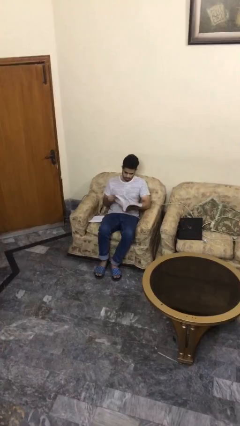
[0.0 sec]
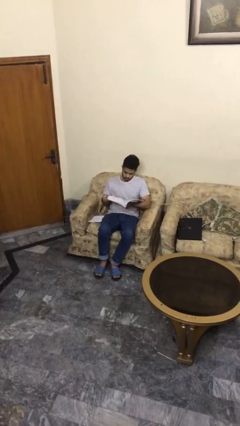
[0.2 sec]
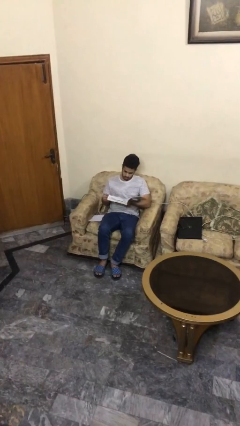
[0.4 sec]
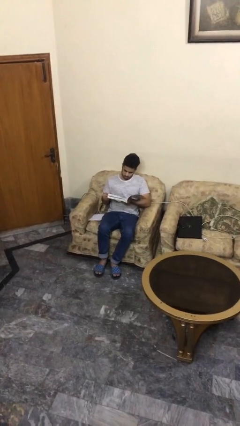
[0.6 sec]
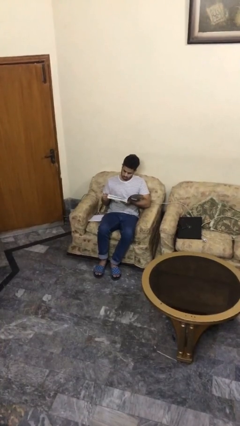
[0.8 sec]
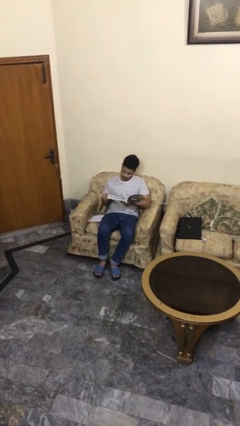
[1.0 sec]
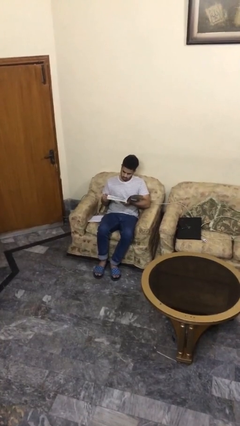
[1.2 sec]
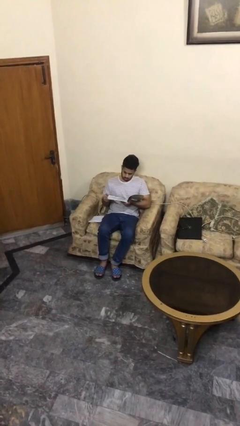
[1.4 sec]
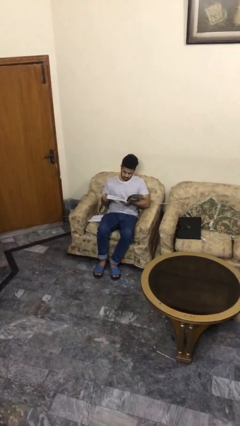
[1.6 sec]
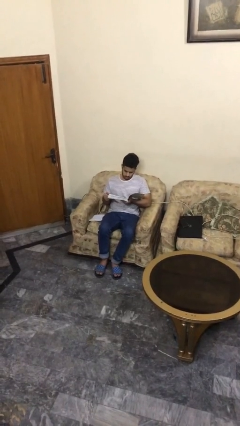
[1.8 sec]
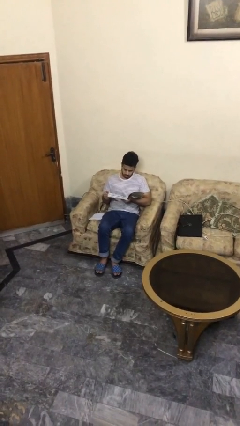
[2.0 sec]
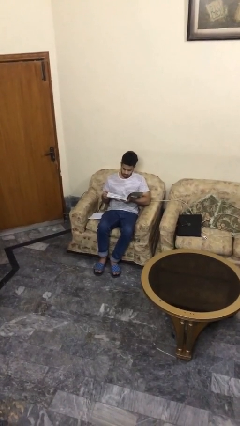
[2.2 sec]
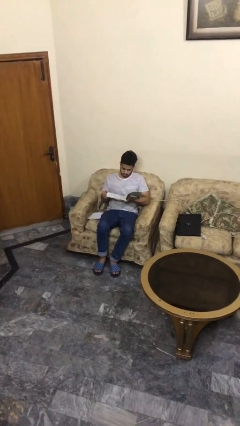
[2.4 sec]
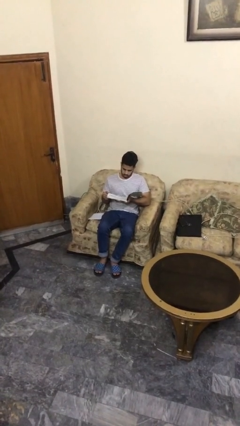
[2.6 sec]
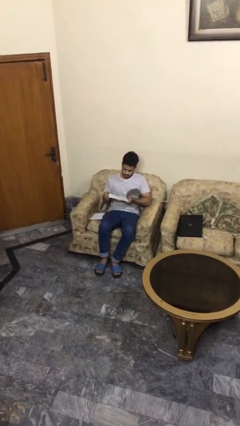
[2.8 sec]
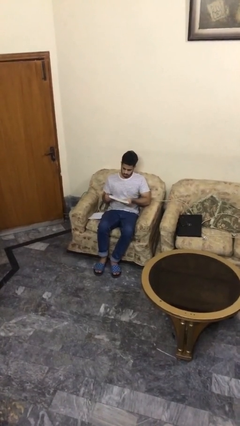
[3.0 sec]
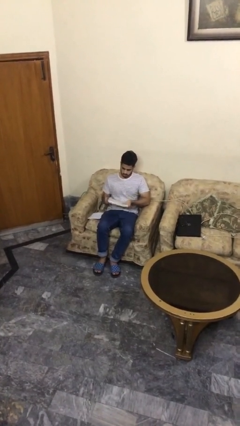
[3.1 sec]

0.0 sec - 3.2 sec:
person reads document

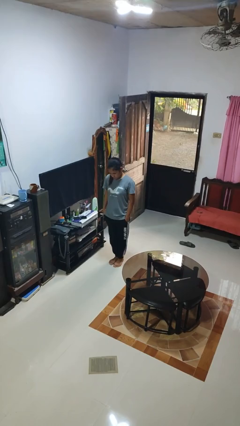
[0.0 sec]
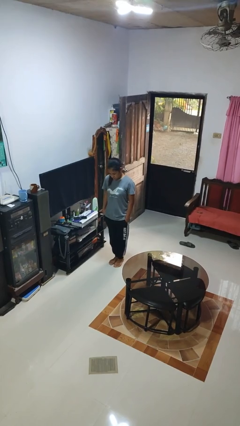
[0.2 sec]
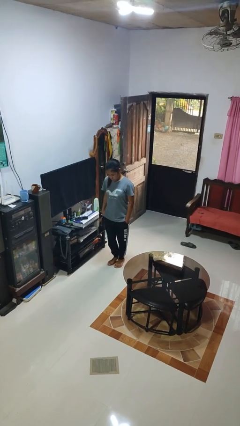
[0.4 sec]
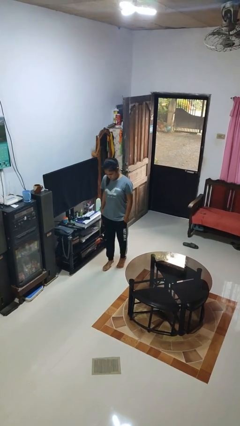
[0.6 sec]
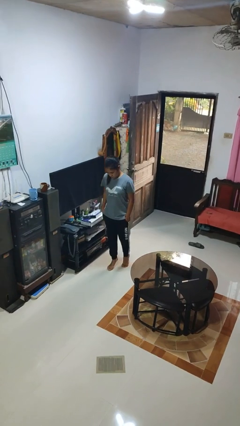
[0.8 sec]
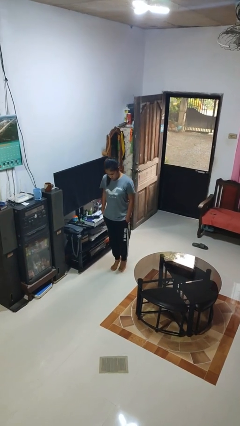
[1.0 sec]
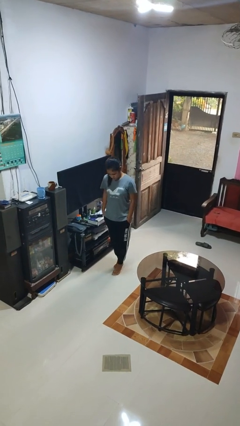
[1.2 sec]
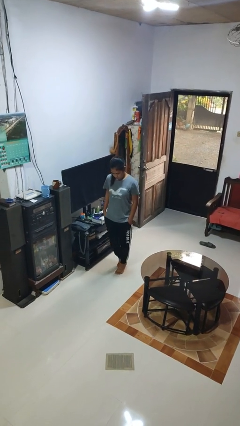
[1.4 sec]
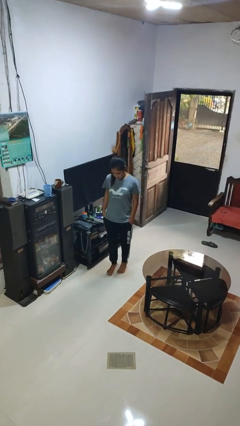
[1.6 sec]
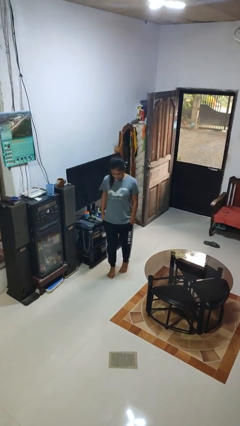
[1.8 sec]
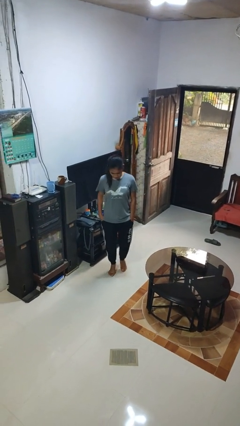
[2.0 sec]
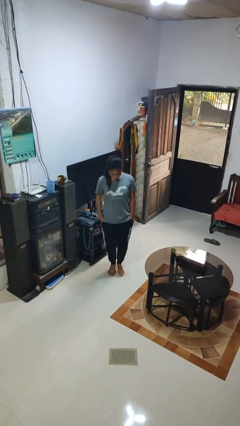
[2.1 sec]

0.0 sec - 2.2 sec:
person walks tiptoe

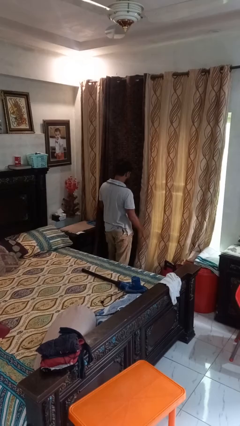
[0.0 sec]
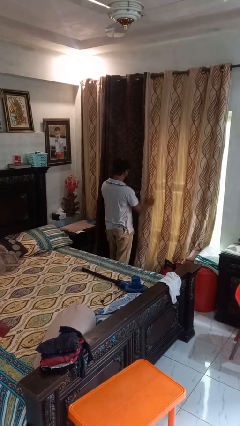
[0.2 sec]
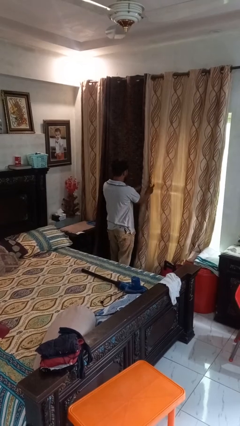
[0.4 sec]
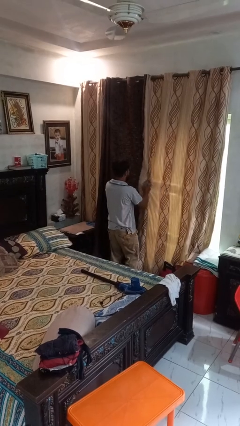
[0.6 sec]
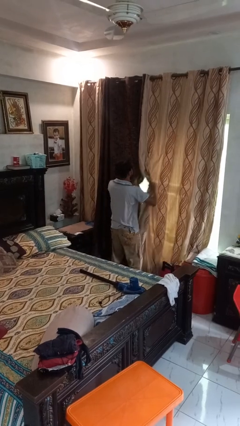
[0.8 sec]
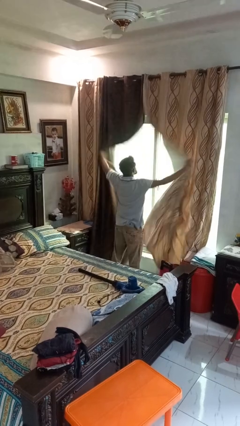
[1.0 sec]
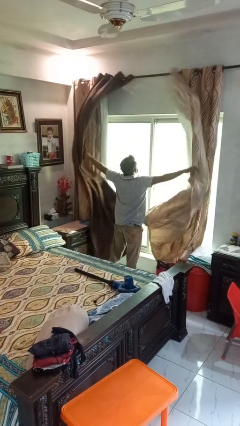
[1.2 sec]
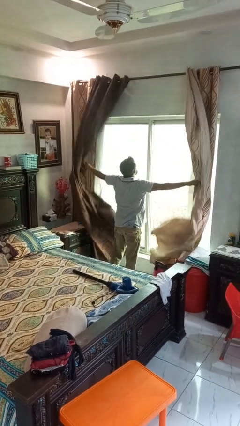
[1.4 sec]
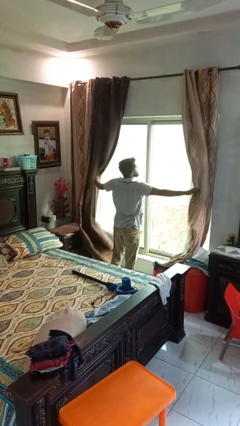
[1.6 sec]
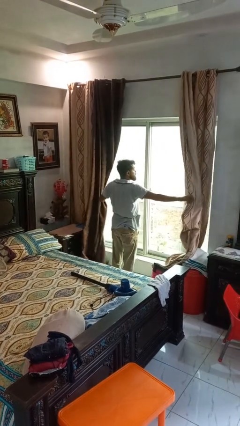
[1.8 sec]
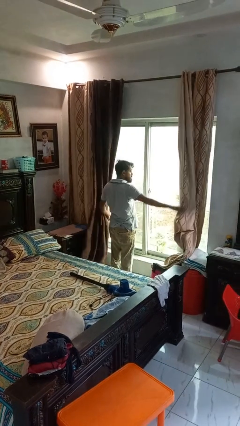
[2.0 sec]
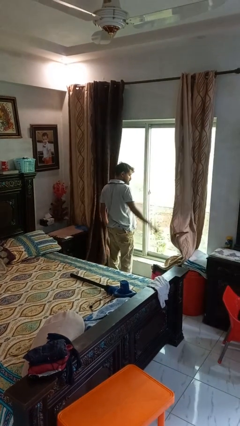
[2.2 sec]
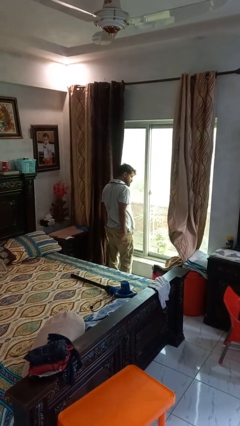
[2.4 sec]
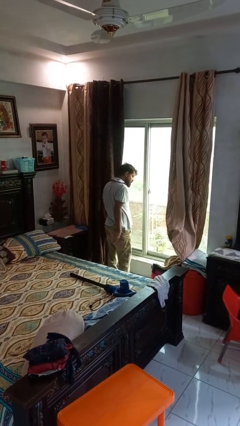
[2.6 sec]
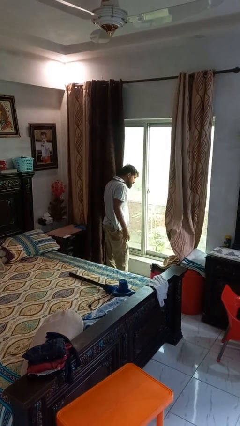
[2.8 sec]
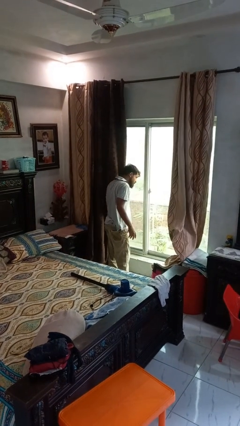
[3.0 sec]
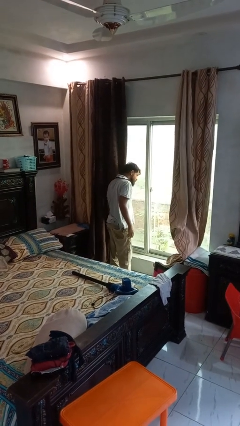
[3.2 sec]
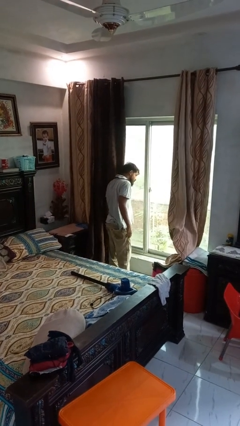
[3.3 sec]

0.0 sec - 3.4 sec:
person opens curtains

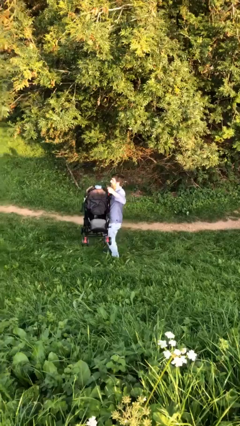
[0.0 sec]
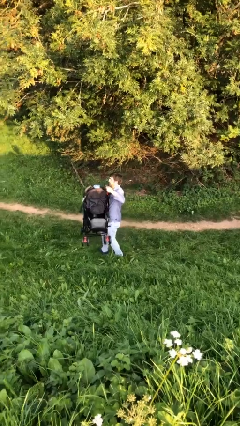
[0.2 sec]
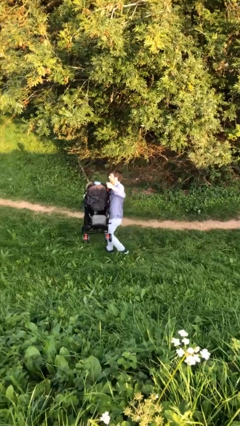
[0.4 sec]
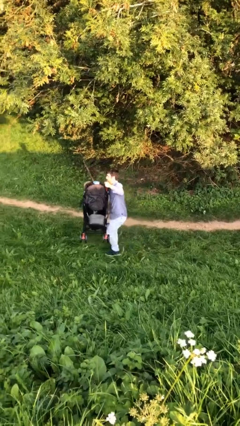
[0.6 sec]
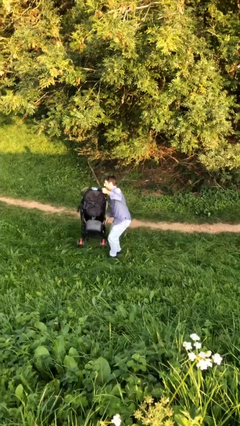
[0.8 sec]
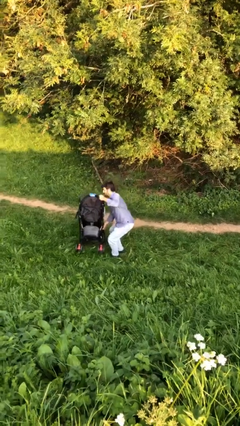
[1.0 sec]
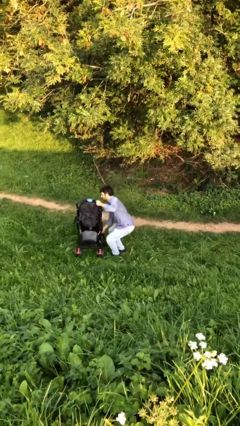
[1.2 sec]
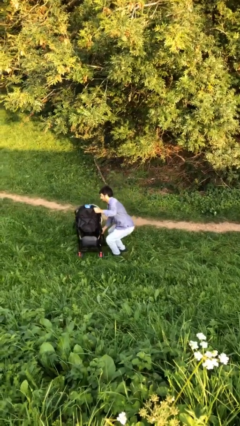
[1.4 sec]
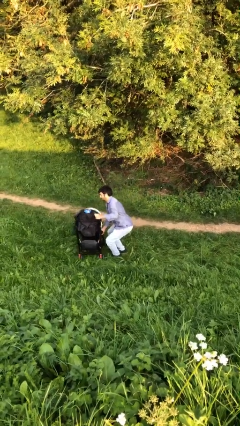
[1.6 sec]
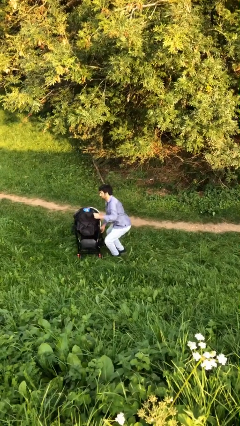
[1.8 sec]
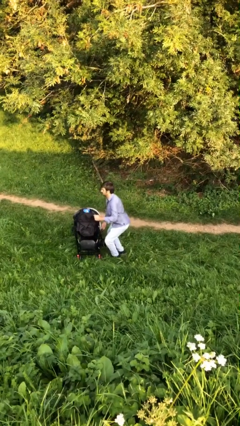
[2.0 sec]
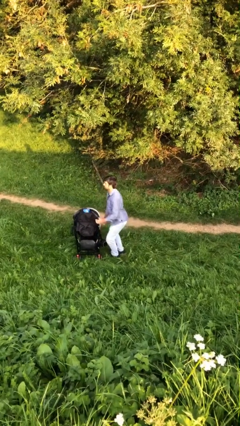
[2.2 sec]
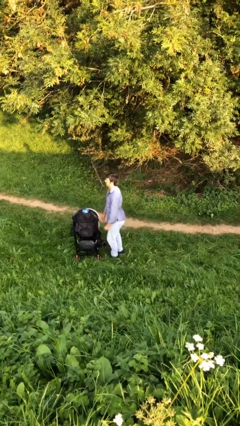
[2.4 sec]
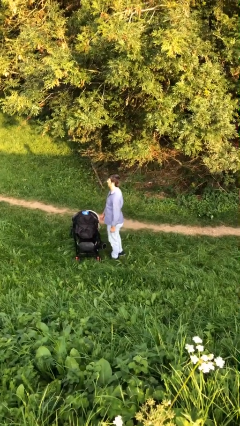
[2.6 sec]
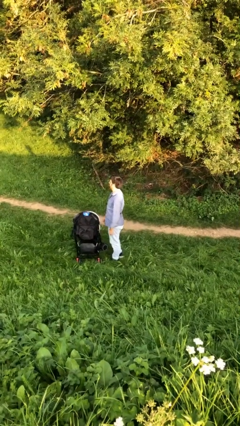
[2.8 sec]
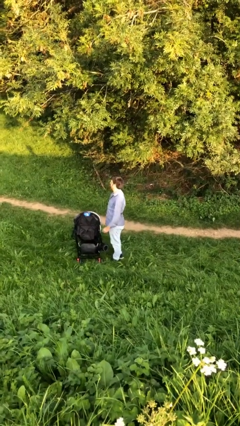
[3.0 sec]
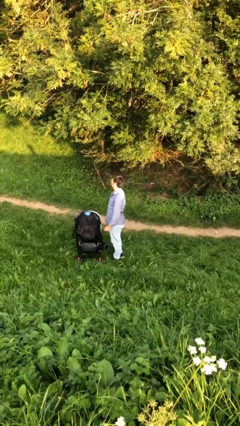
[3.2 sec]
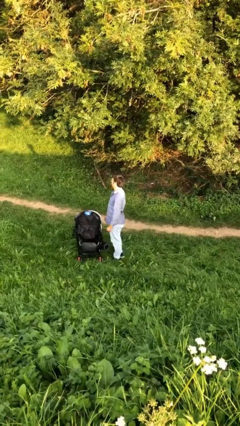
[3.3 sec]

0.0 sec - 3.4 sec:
person puts down object on floor

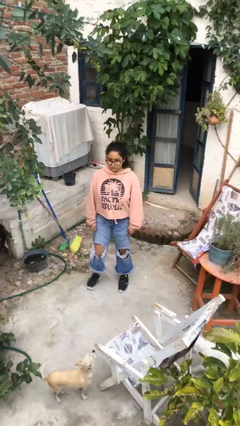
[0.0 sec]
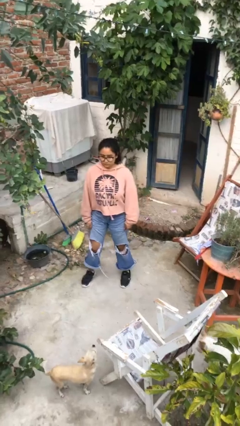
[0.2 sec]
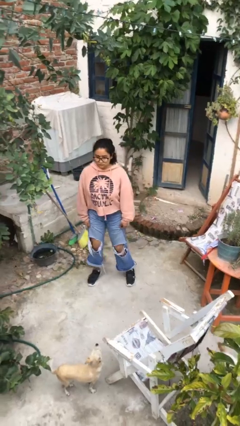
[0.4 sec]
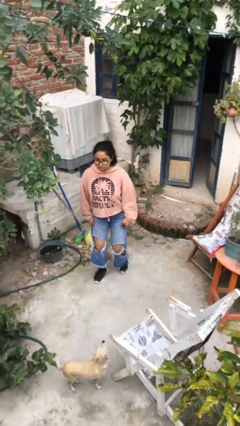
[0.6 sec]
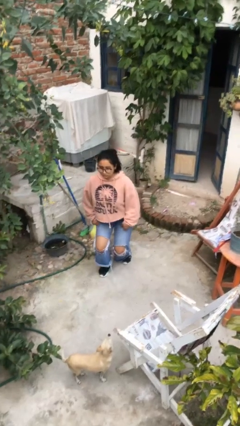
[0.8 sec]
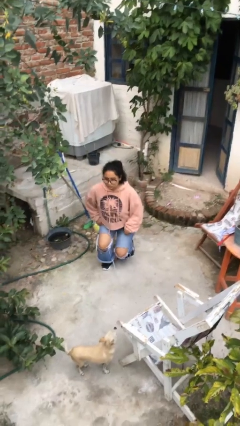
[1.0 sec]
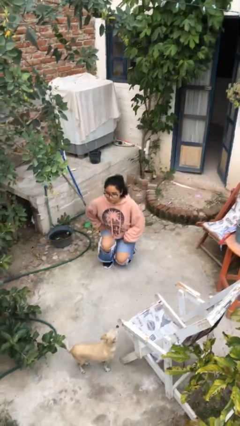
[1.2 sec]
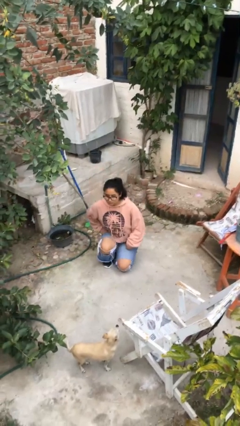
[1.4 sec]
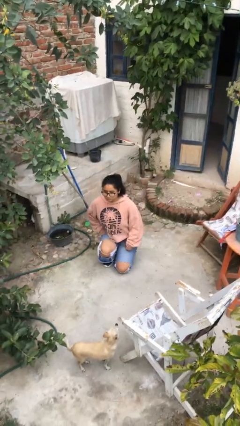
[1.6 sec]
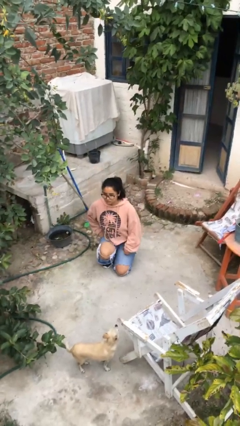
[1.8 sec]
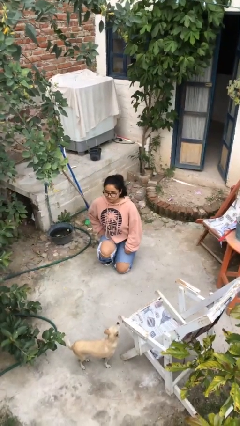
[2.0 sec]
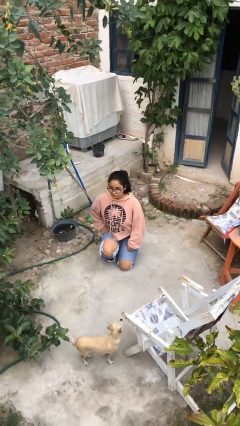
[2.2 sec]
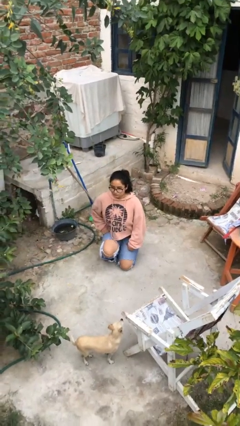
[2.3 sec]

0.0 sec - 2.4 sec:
person kneels

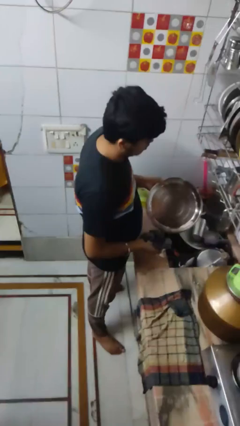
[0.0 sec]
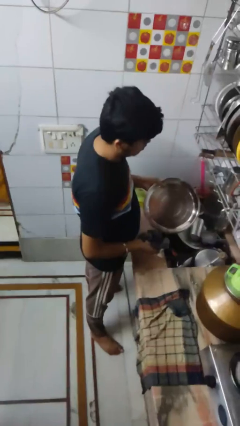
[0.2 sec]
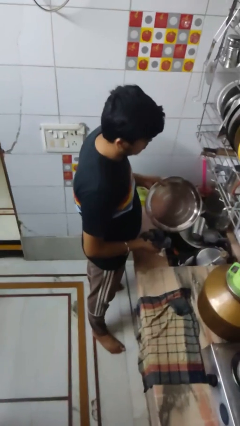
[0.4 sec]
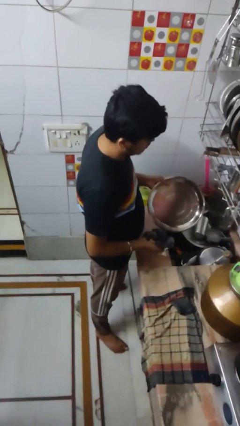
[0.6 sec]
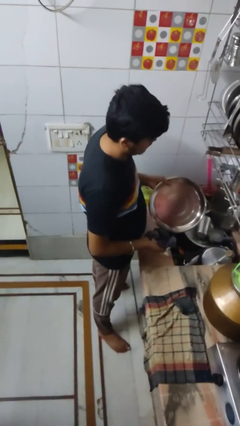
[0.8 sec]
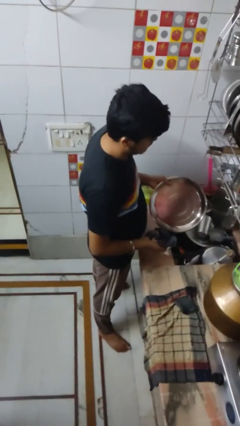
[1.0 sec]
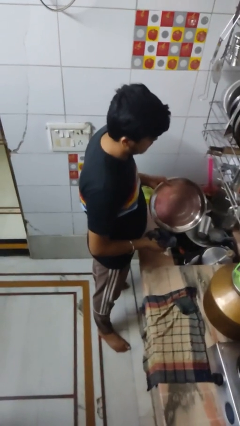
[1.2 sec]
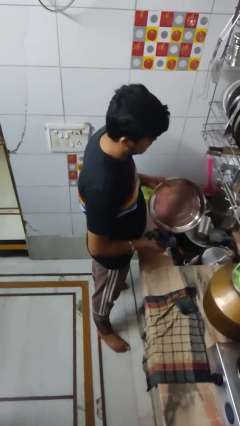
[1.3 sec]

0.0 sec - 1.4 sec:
person dries dish

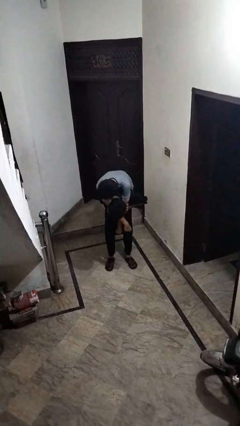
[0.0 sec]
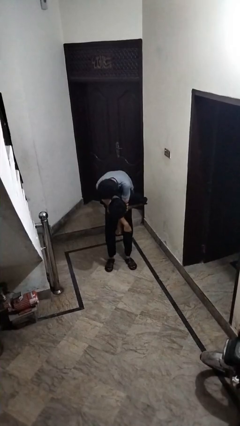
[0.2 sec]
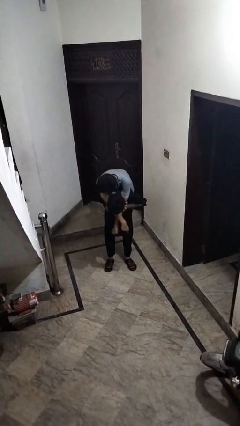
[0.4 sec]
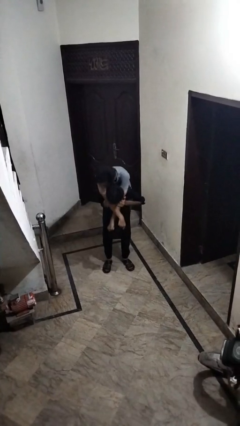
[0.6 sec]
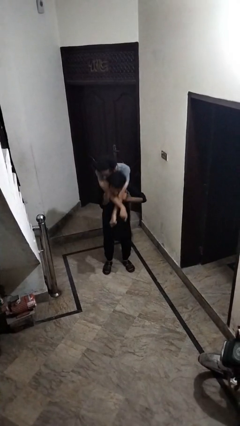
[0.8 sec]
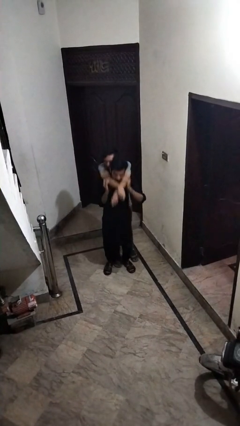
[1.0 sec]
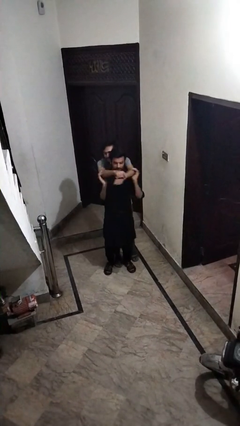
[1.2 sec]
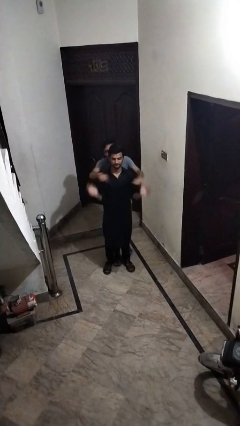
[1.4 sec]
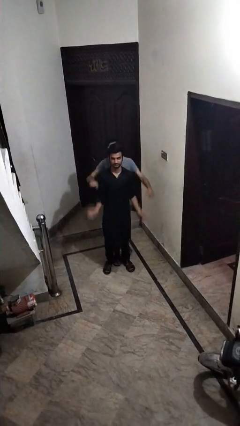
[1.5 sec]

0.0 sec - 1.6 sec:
person puts down person
